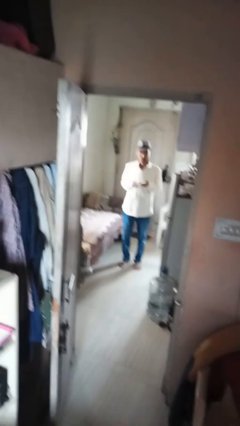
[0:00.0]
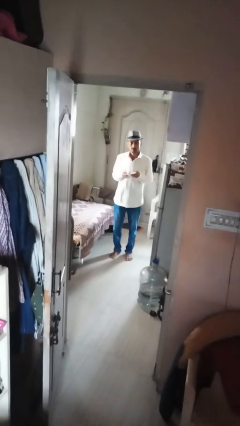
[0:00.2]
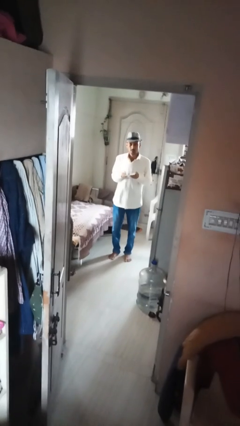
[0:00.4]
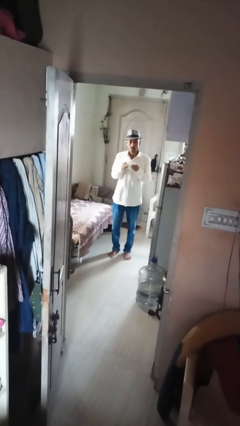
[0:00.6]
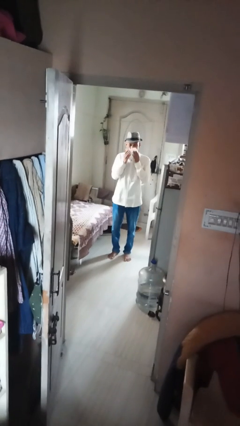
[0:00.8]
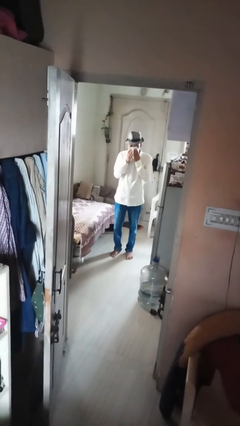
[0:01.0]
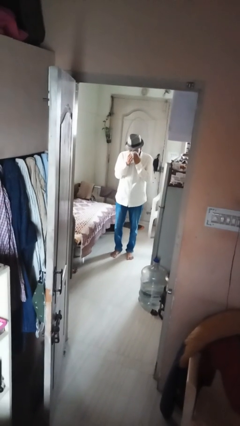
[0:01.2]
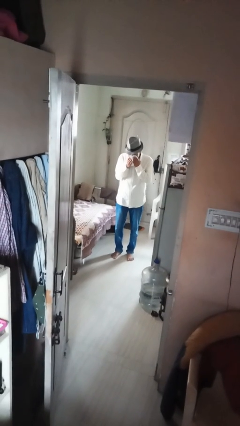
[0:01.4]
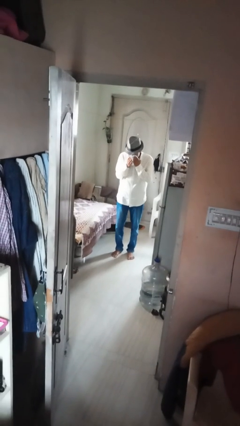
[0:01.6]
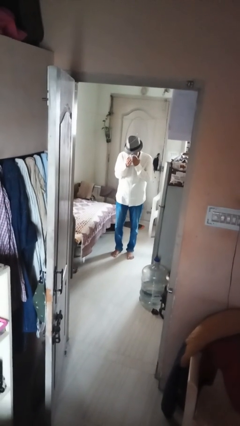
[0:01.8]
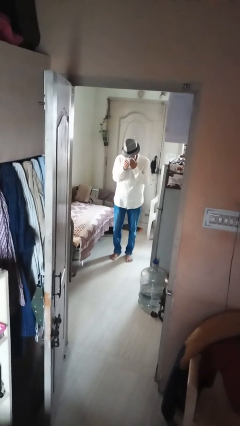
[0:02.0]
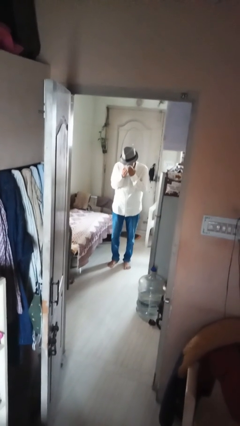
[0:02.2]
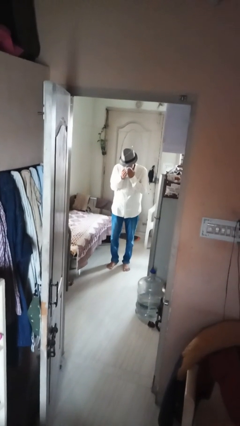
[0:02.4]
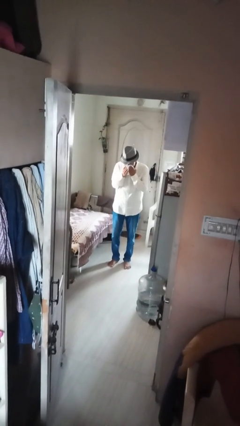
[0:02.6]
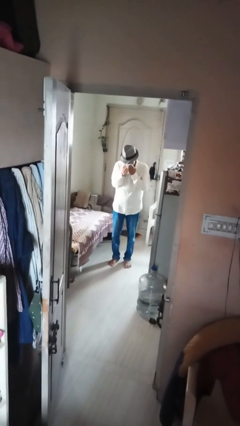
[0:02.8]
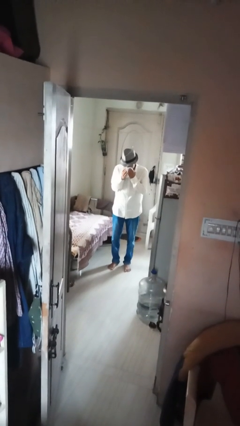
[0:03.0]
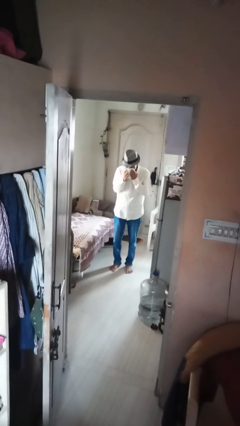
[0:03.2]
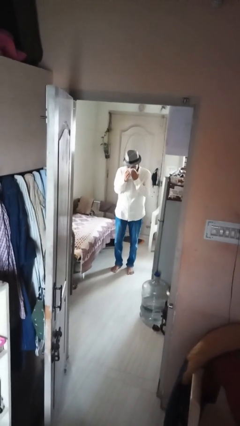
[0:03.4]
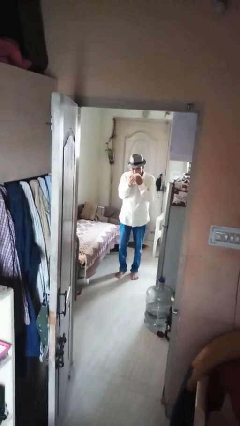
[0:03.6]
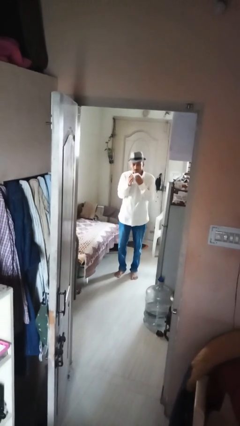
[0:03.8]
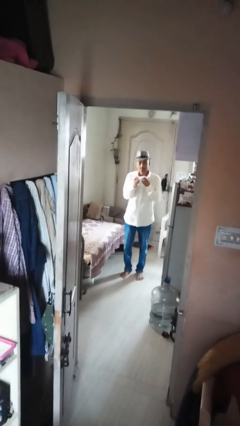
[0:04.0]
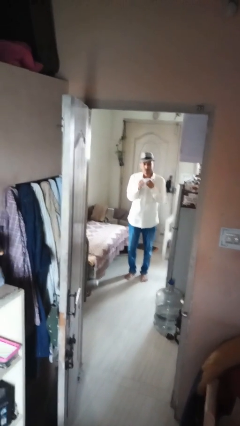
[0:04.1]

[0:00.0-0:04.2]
person blows nose

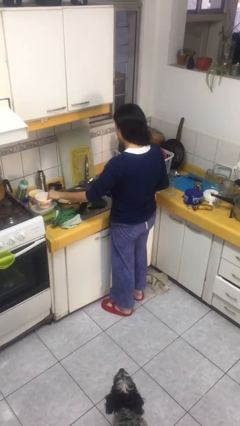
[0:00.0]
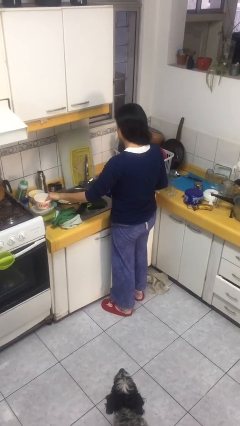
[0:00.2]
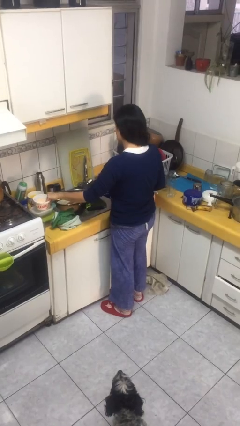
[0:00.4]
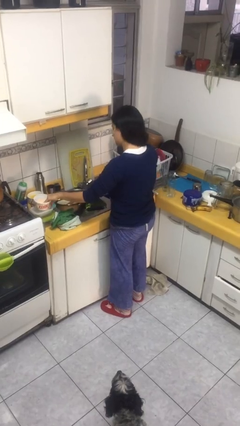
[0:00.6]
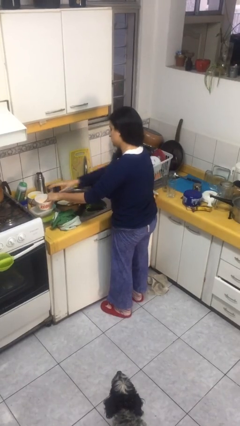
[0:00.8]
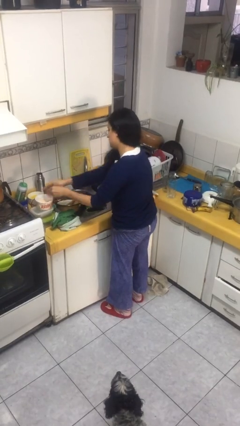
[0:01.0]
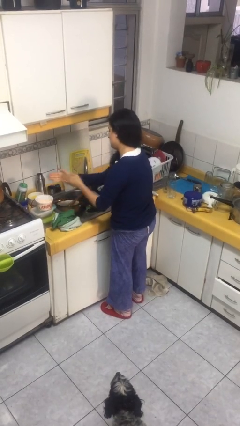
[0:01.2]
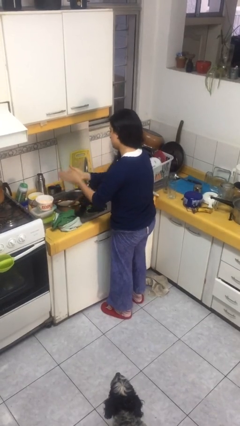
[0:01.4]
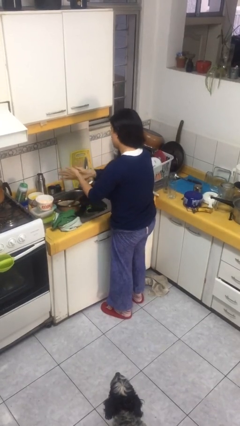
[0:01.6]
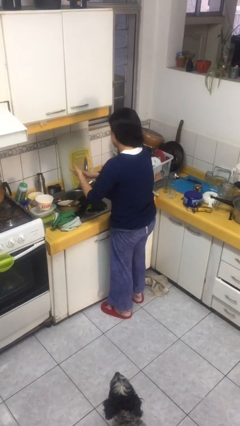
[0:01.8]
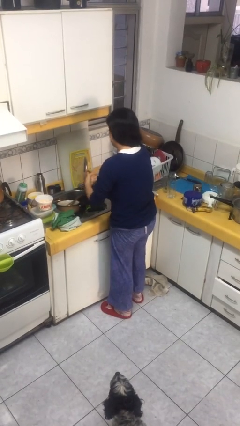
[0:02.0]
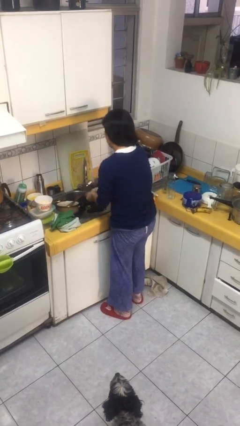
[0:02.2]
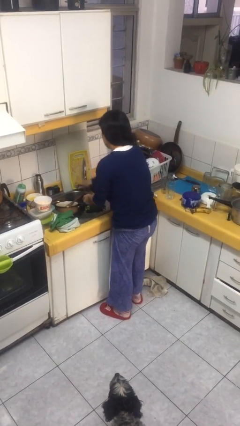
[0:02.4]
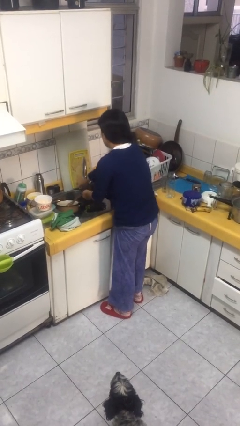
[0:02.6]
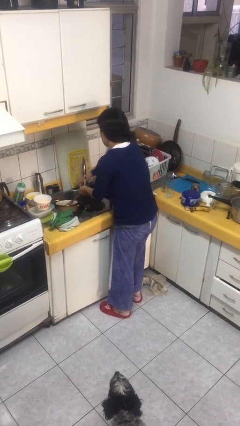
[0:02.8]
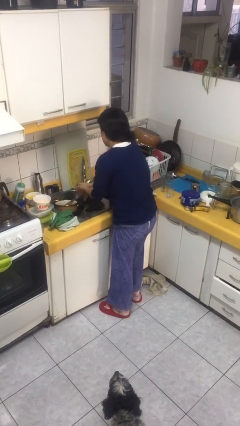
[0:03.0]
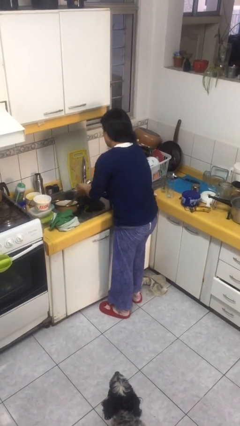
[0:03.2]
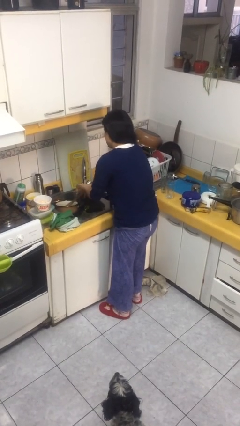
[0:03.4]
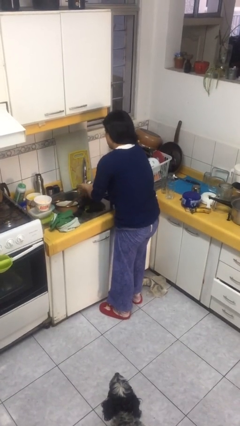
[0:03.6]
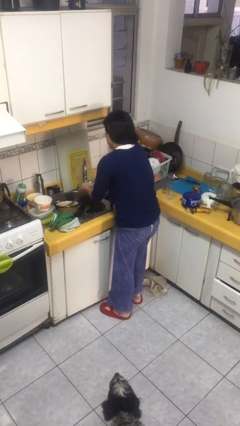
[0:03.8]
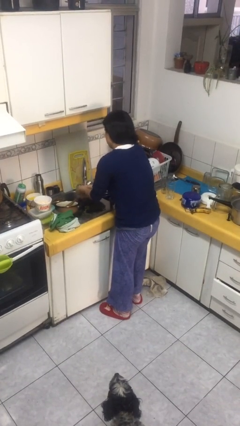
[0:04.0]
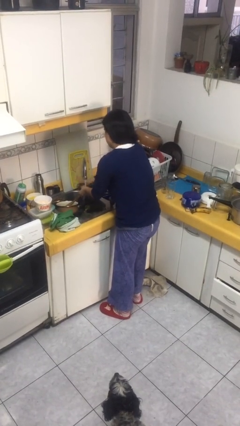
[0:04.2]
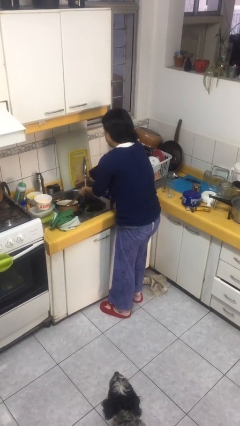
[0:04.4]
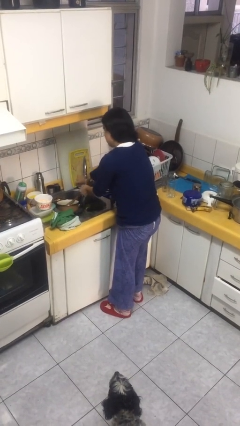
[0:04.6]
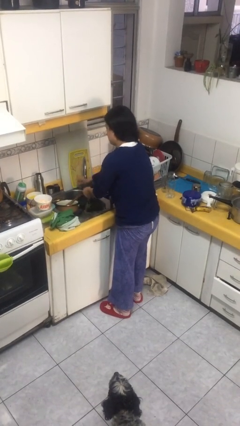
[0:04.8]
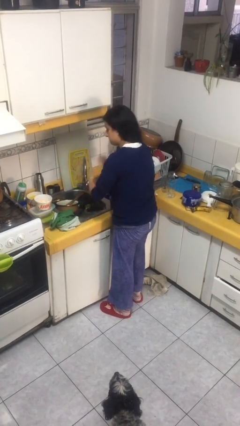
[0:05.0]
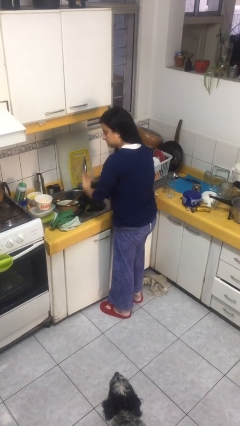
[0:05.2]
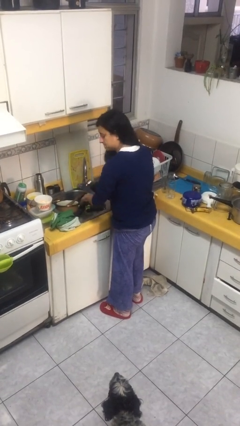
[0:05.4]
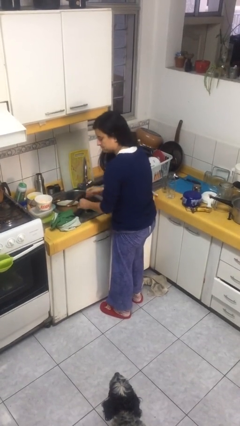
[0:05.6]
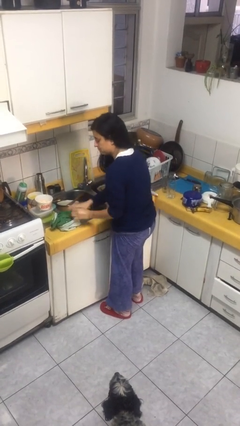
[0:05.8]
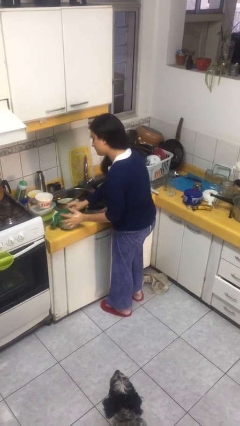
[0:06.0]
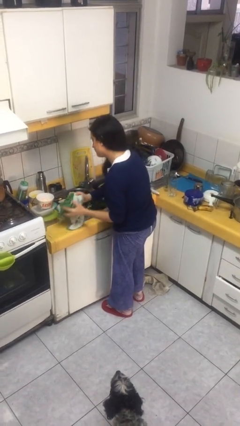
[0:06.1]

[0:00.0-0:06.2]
person washes hands

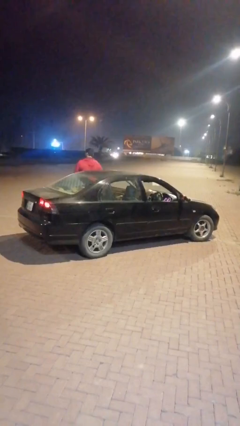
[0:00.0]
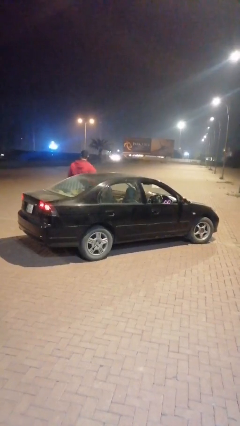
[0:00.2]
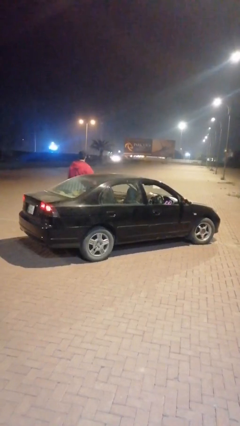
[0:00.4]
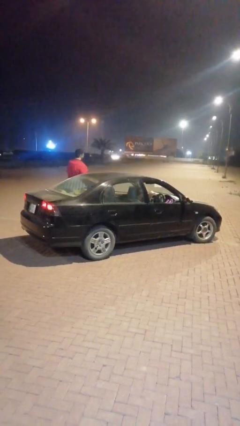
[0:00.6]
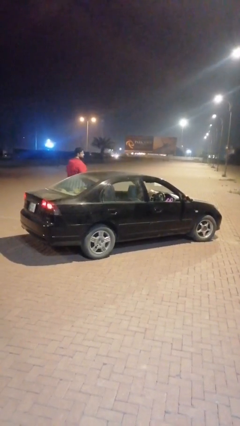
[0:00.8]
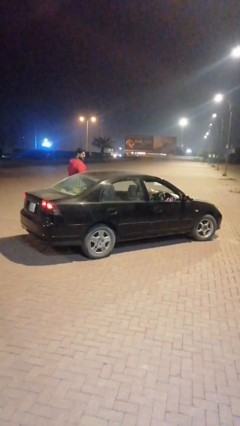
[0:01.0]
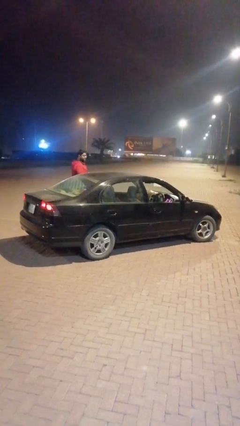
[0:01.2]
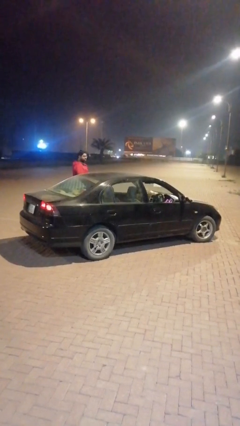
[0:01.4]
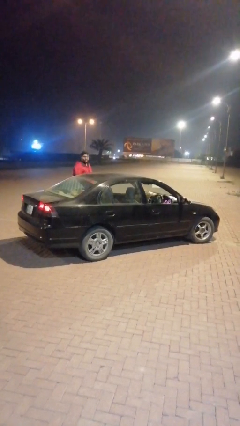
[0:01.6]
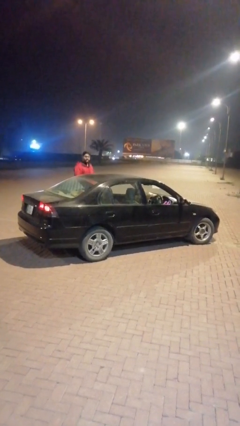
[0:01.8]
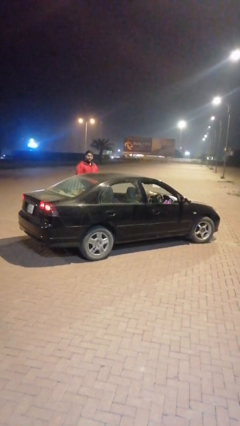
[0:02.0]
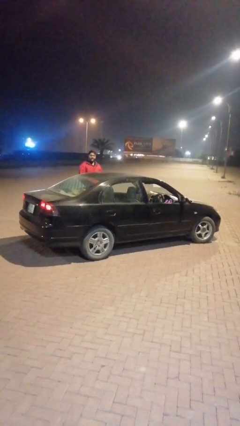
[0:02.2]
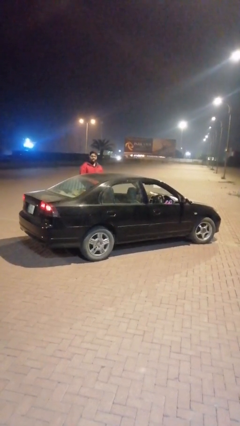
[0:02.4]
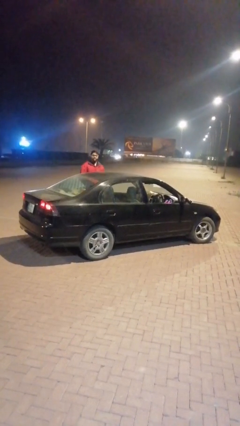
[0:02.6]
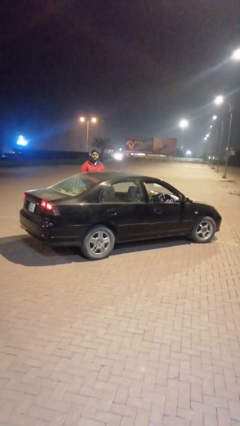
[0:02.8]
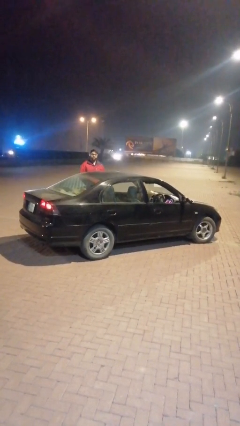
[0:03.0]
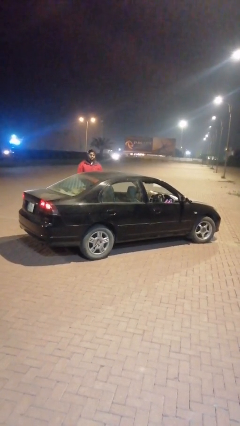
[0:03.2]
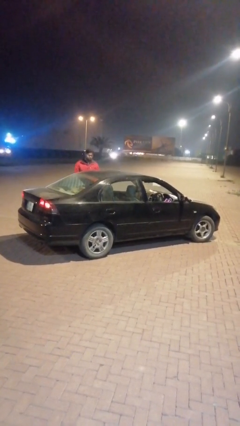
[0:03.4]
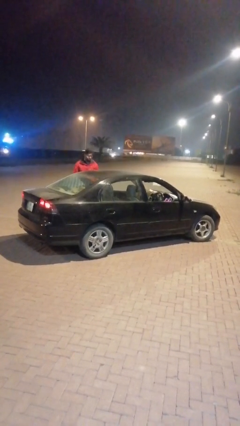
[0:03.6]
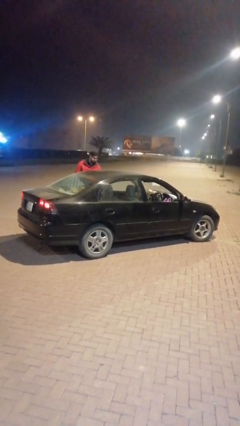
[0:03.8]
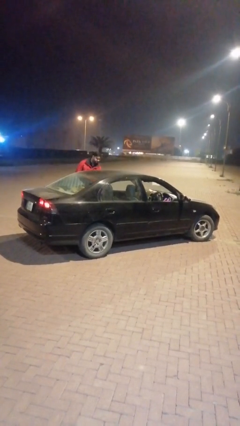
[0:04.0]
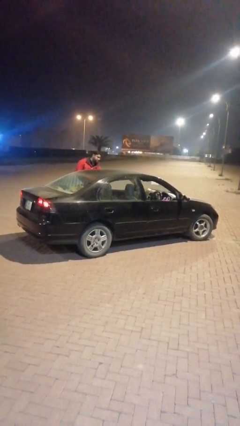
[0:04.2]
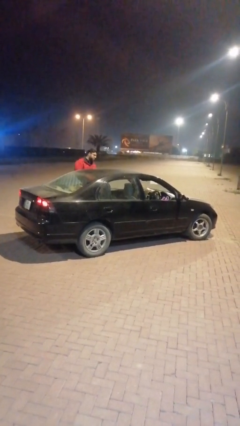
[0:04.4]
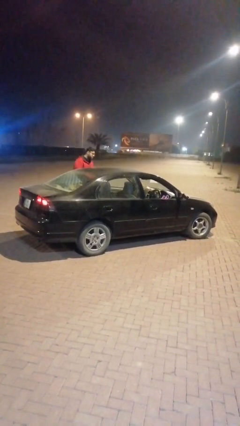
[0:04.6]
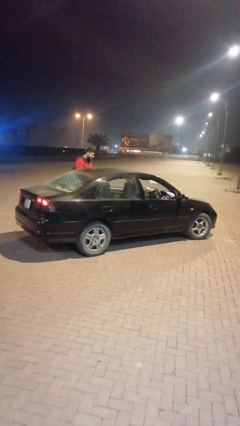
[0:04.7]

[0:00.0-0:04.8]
car drops off person

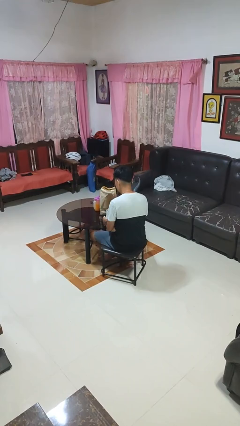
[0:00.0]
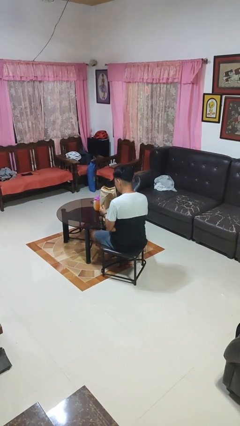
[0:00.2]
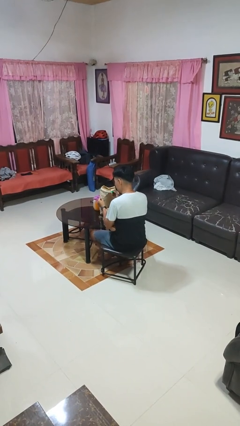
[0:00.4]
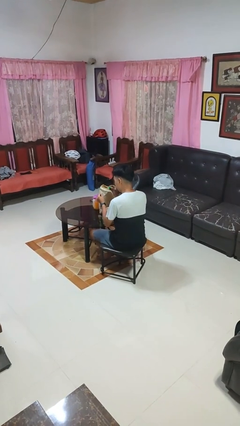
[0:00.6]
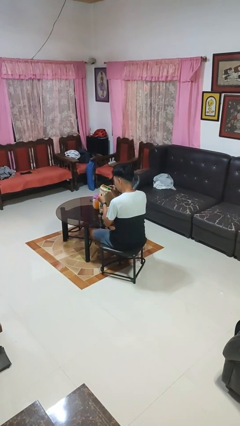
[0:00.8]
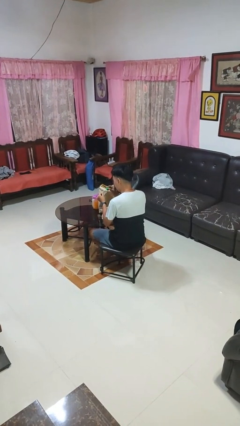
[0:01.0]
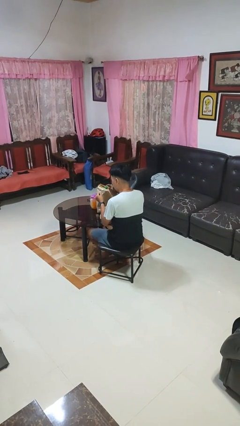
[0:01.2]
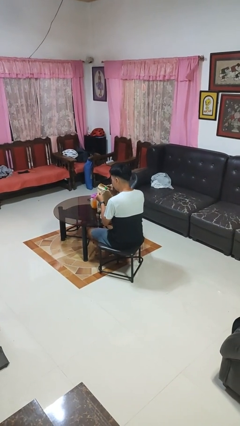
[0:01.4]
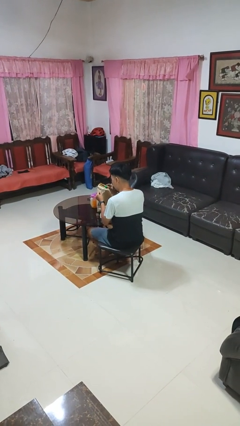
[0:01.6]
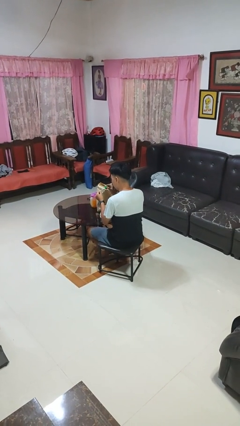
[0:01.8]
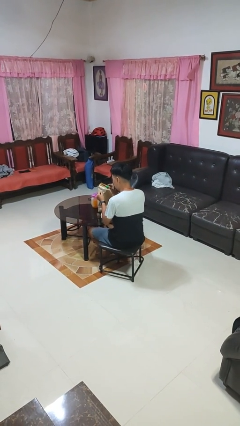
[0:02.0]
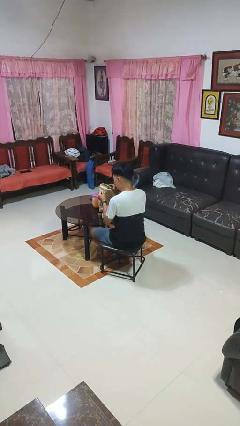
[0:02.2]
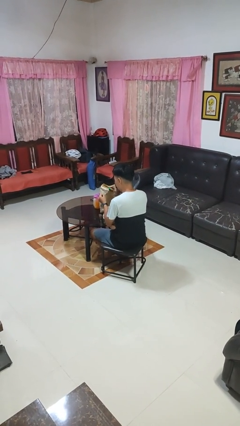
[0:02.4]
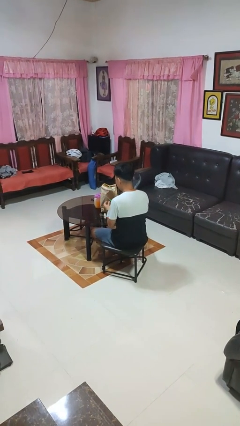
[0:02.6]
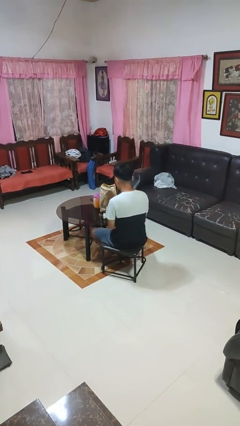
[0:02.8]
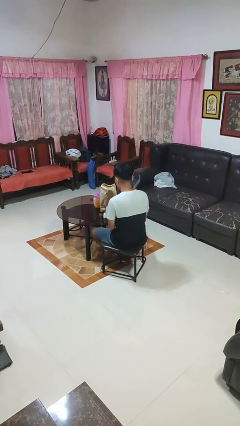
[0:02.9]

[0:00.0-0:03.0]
person paints fingernails
